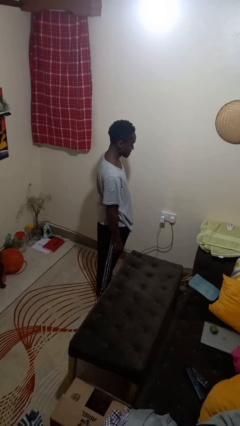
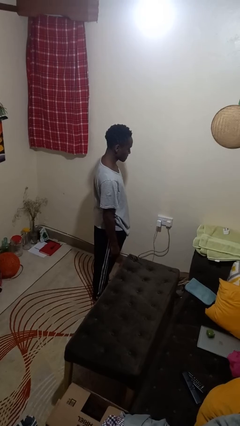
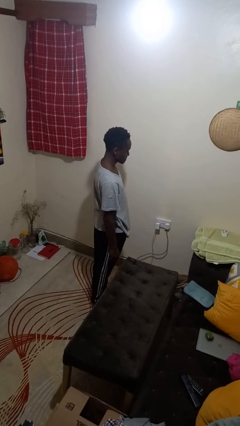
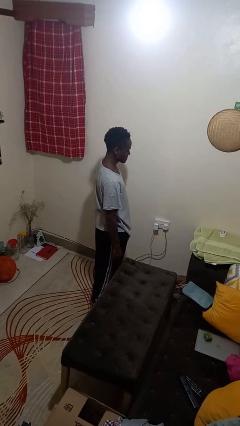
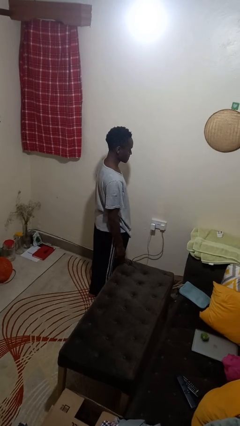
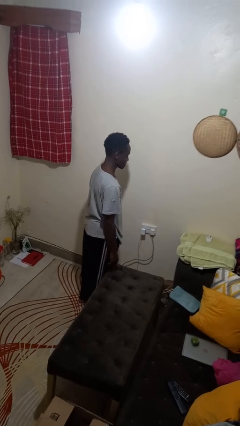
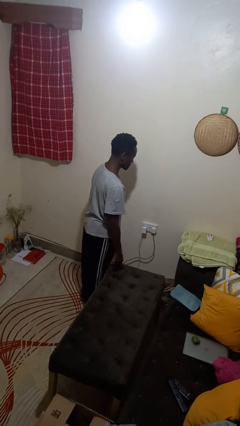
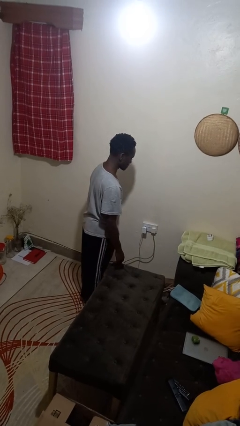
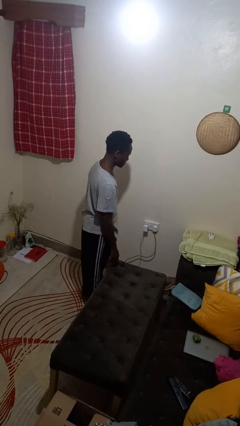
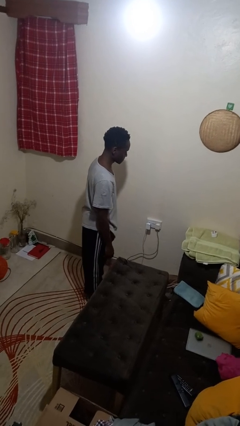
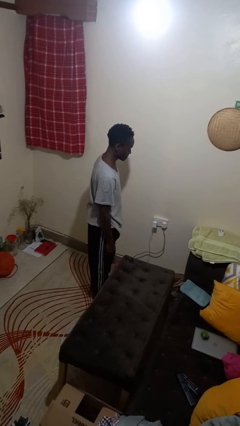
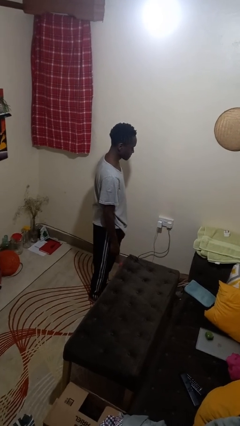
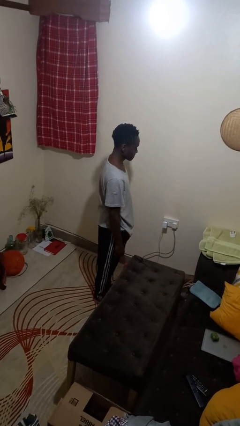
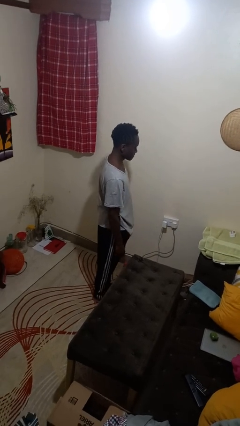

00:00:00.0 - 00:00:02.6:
person bumps into table

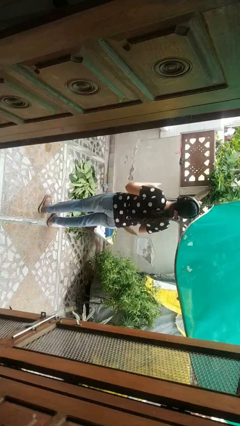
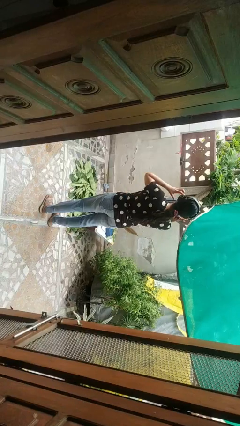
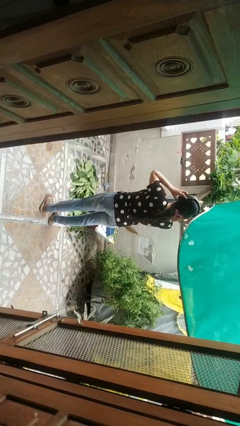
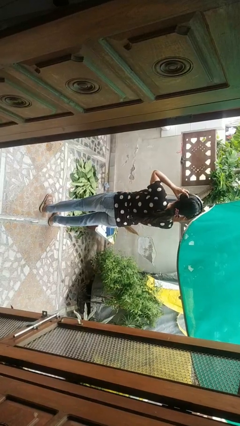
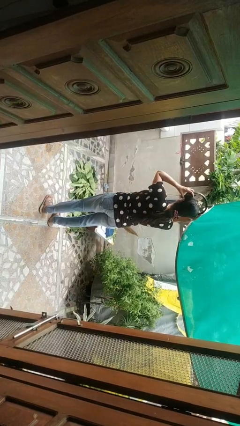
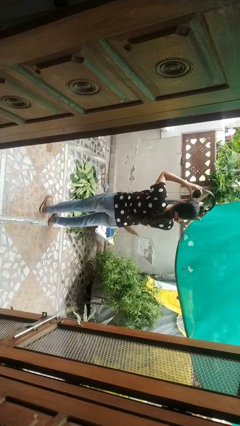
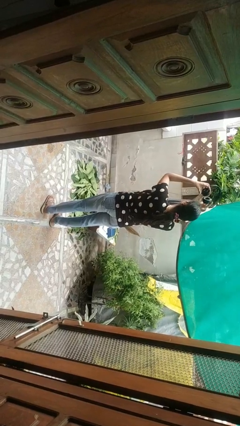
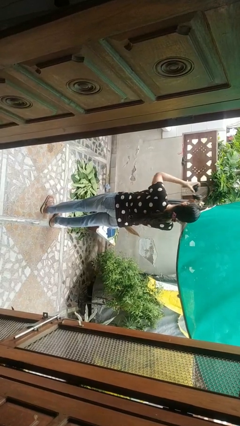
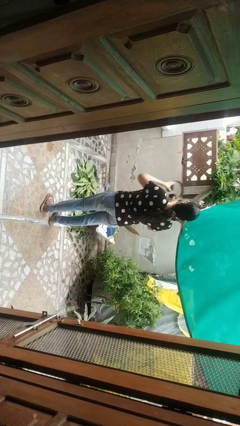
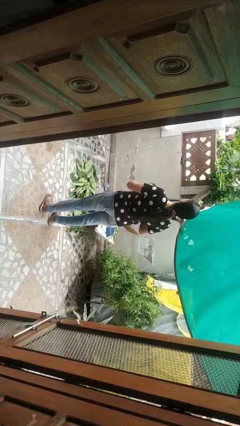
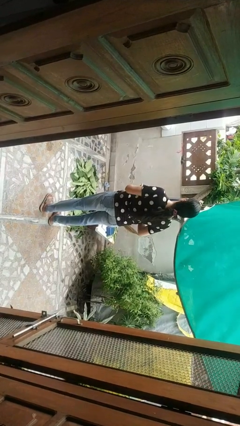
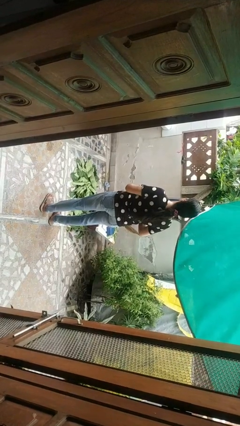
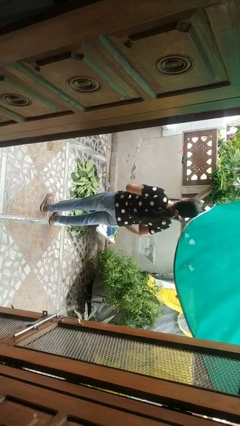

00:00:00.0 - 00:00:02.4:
person takes off headphones

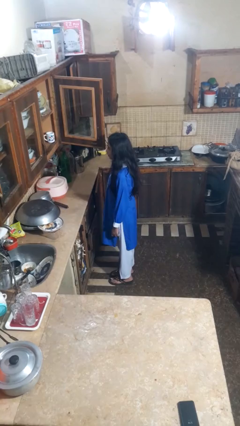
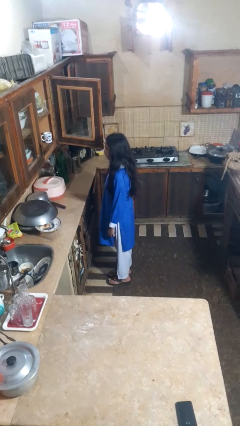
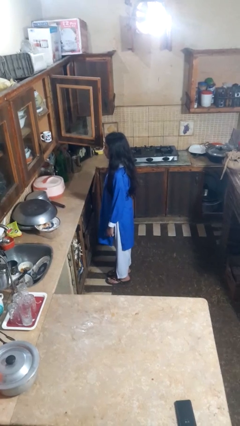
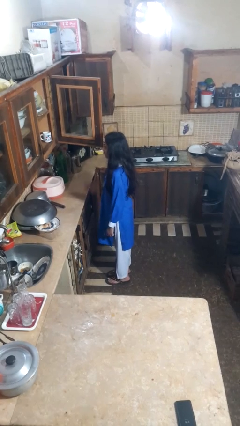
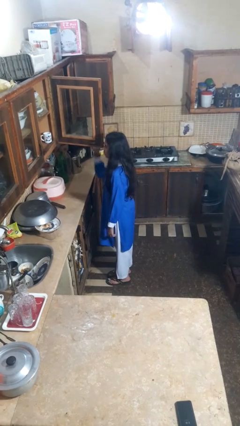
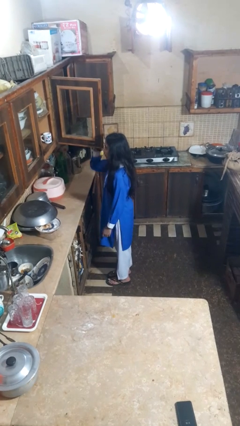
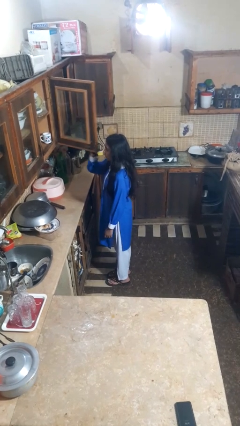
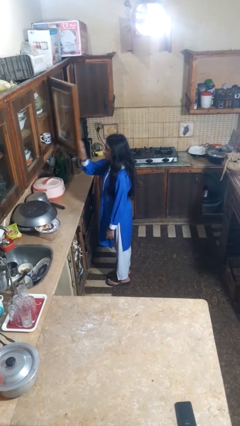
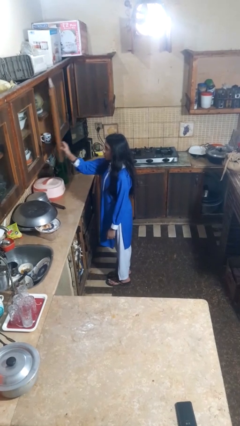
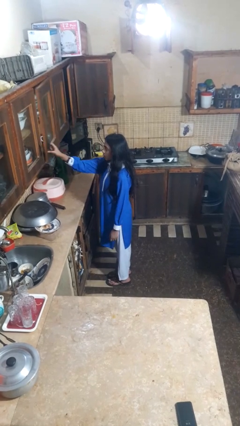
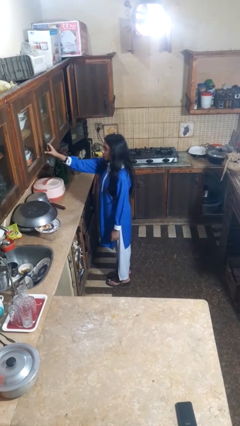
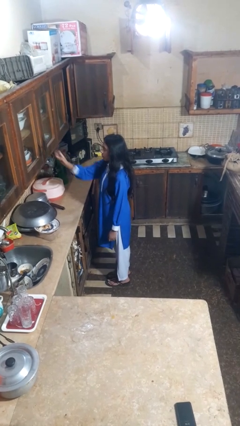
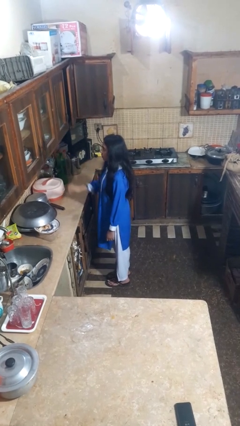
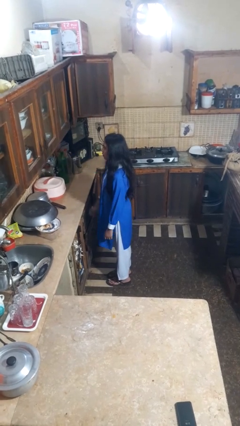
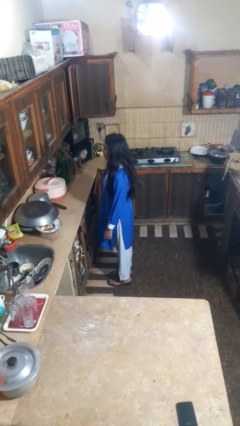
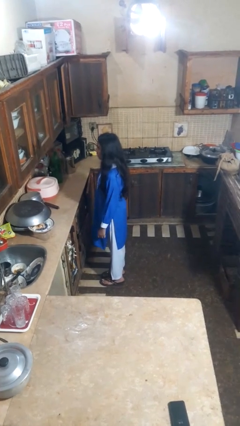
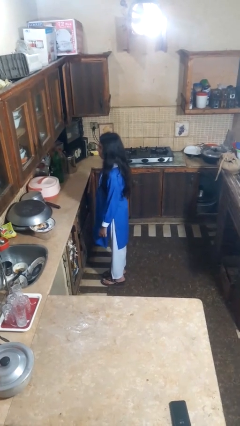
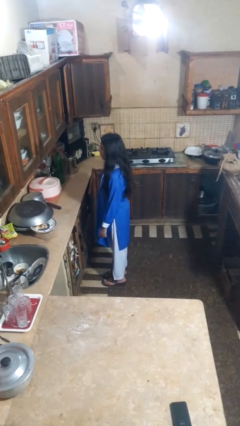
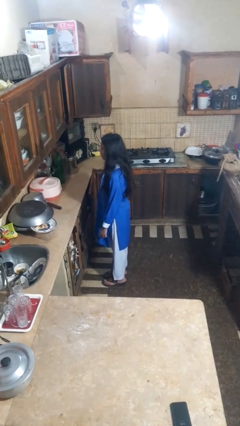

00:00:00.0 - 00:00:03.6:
person closes cabinet

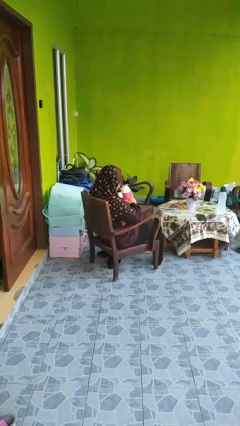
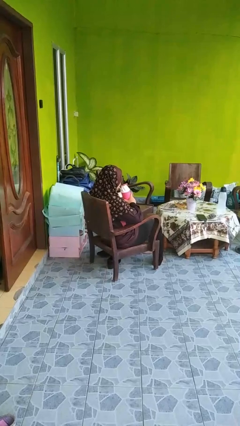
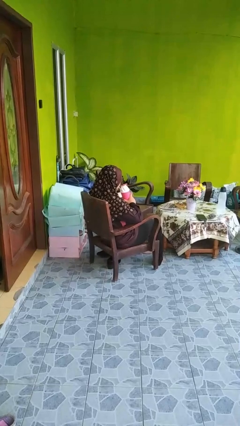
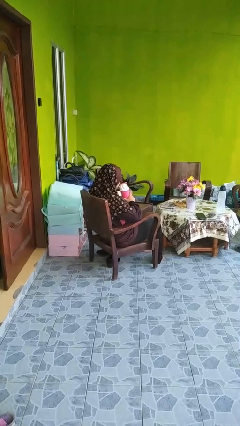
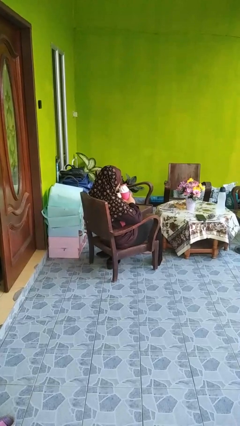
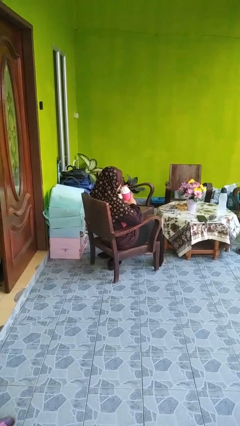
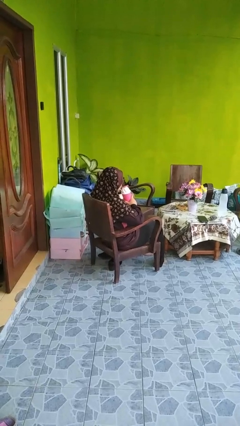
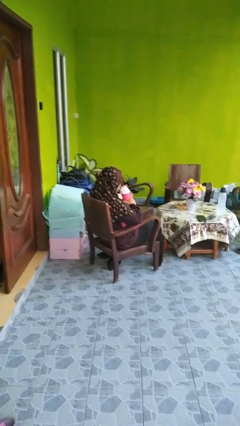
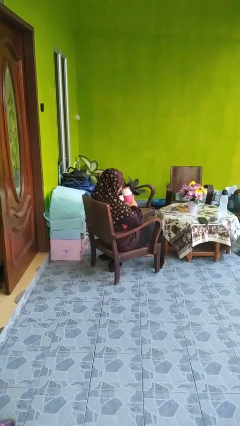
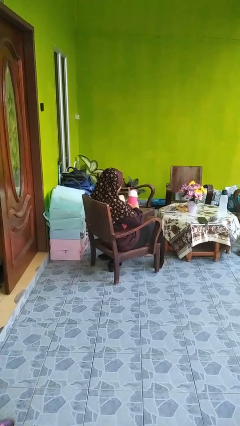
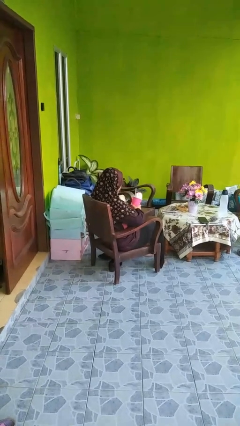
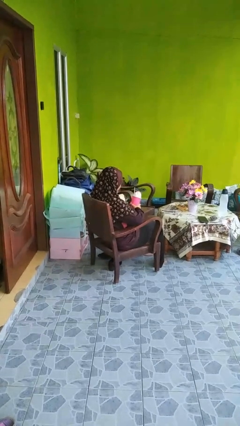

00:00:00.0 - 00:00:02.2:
person drinks from straw

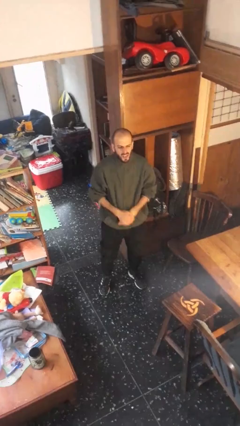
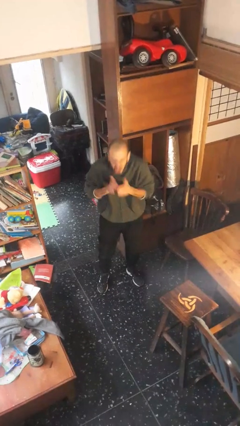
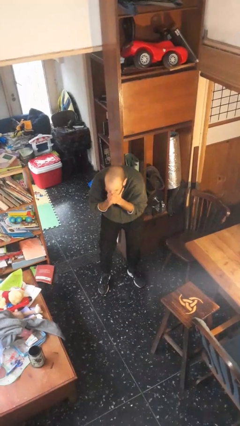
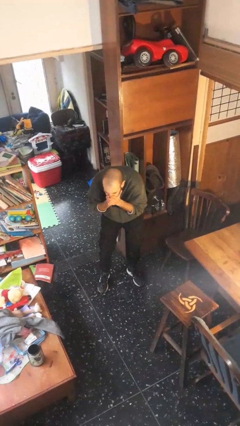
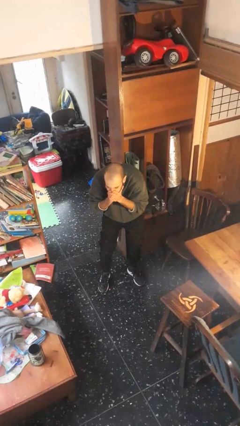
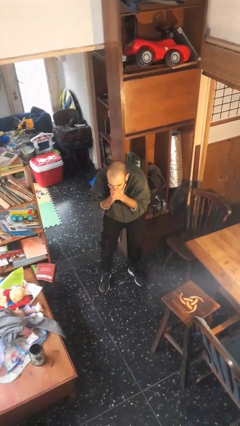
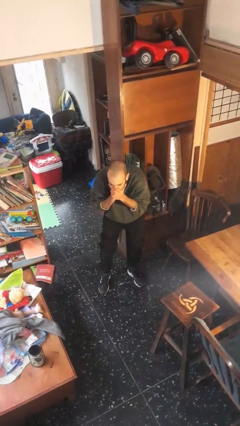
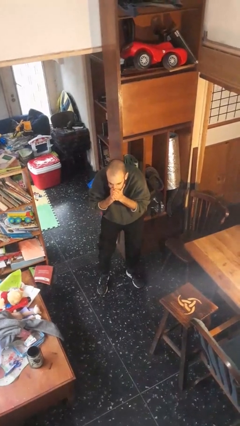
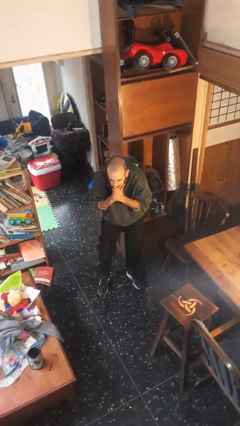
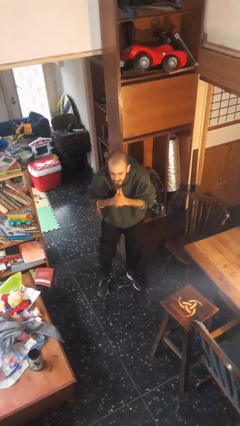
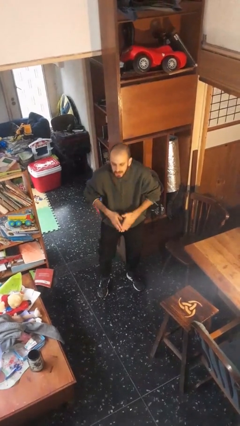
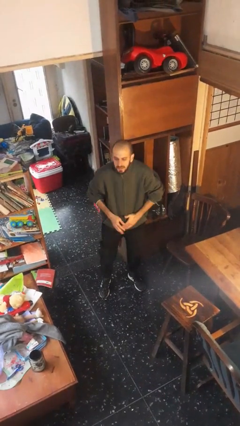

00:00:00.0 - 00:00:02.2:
person sneezes into hand

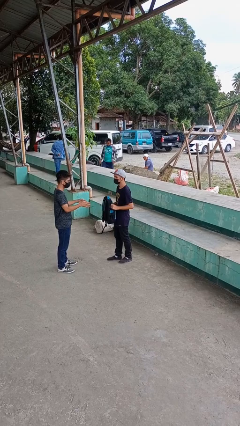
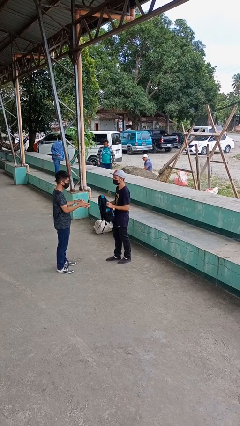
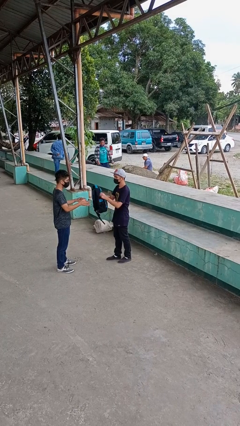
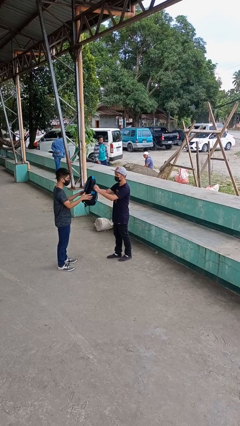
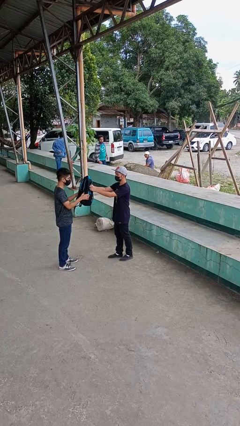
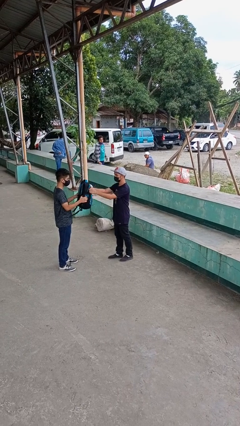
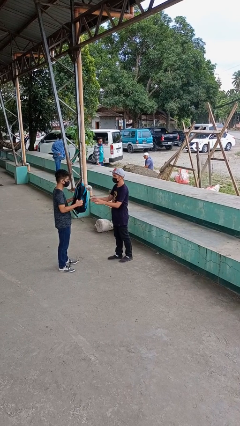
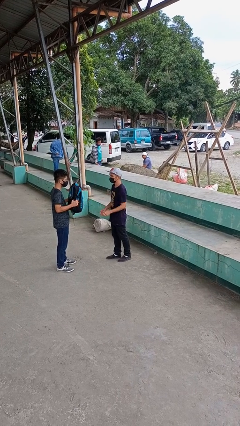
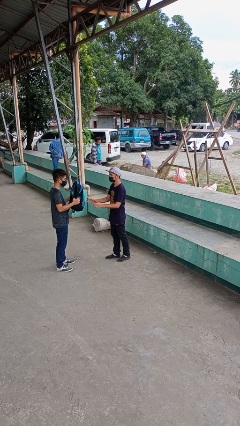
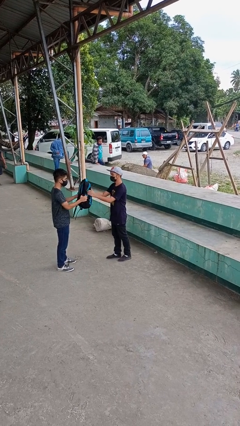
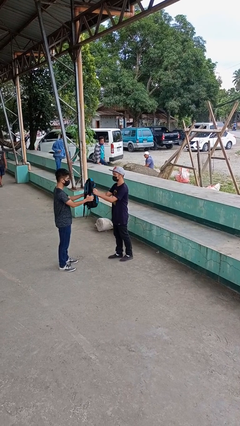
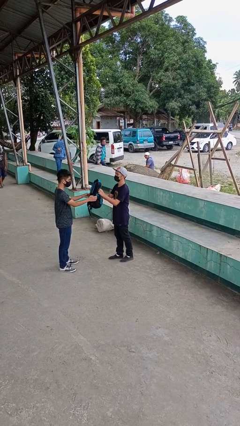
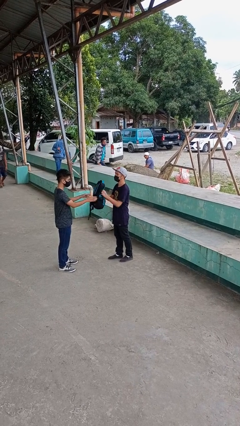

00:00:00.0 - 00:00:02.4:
person transfers object to person

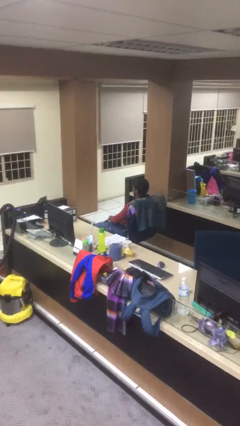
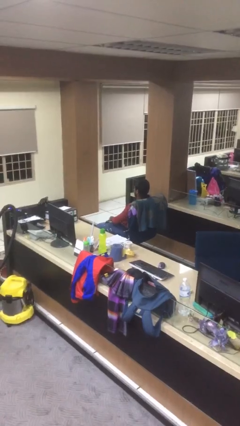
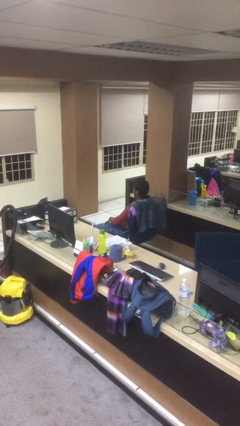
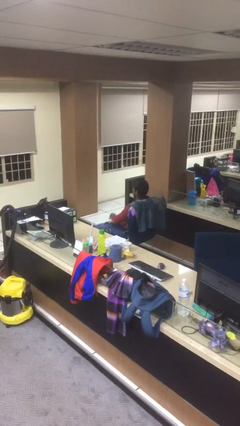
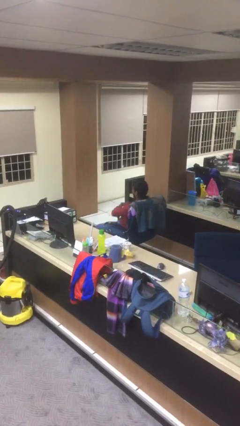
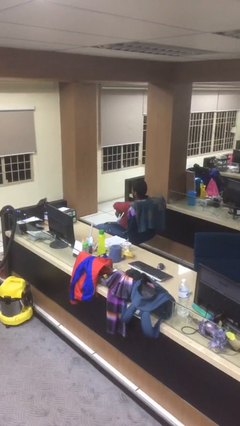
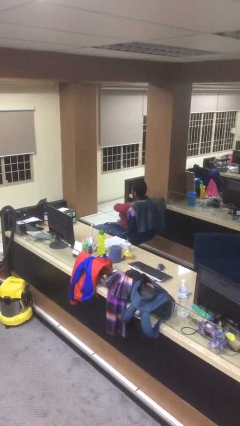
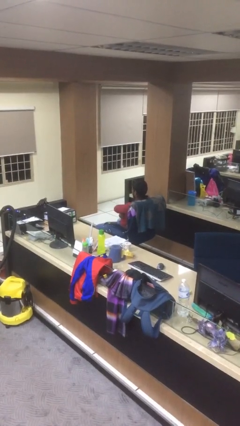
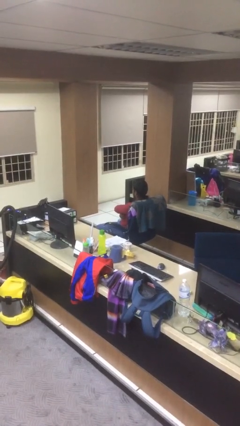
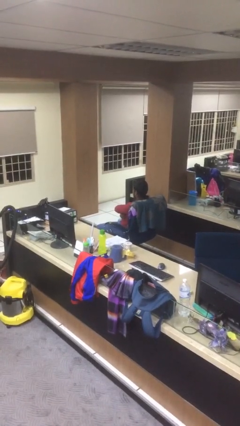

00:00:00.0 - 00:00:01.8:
person crosses arms
